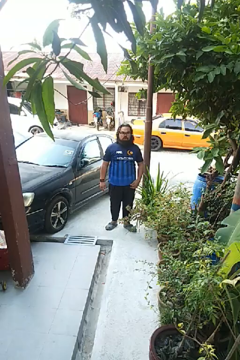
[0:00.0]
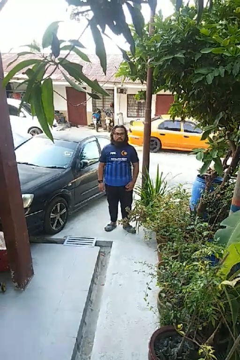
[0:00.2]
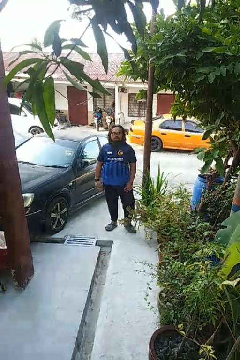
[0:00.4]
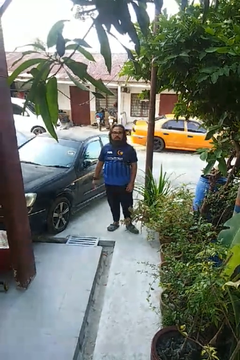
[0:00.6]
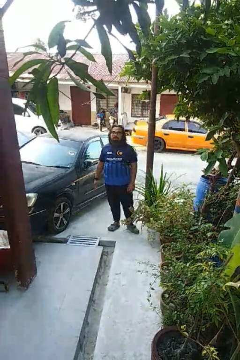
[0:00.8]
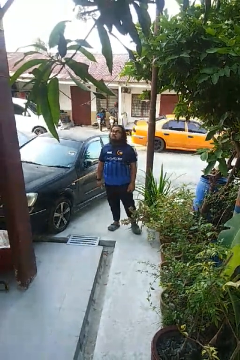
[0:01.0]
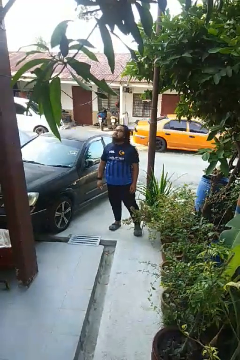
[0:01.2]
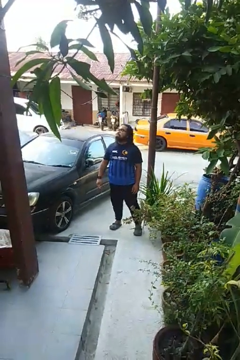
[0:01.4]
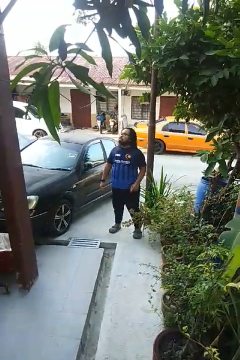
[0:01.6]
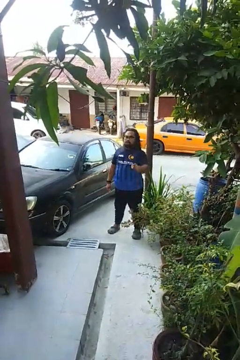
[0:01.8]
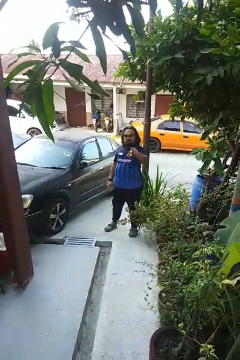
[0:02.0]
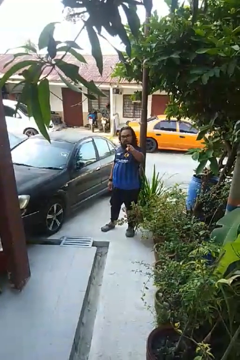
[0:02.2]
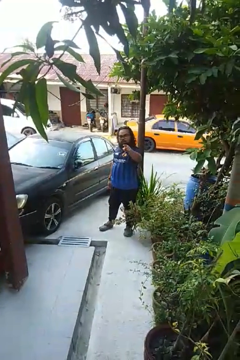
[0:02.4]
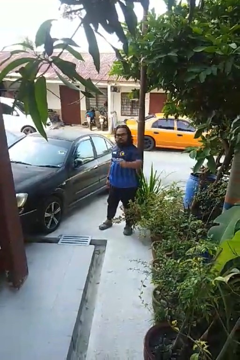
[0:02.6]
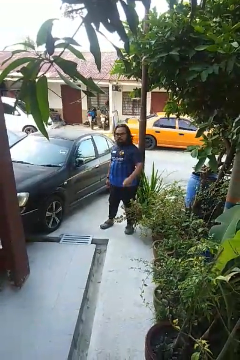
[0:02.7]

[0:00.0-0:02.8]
person points at person

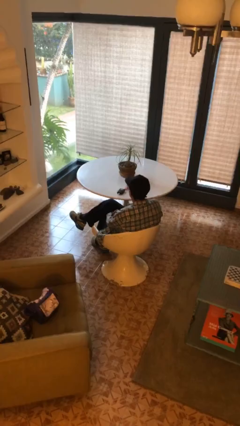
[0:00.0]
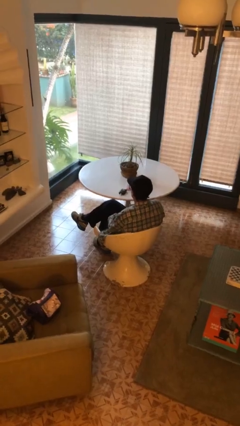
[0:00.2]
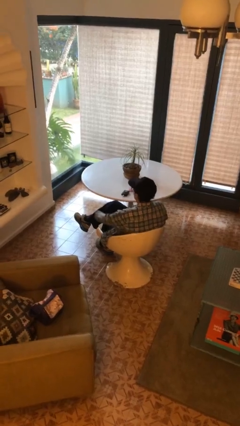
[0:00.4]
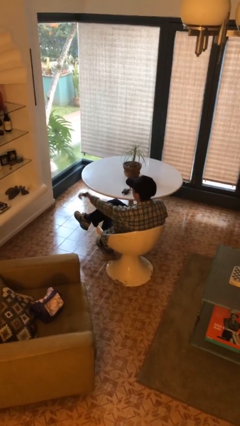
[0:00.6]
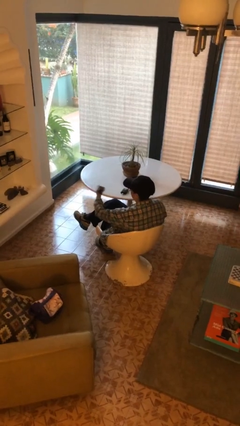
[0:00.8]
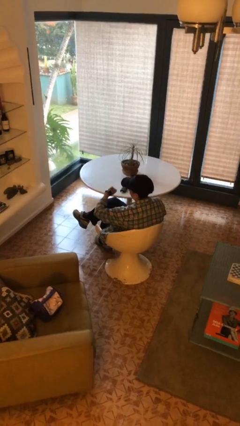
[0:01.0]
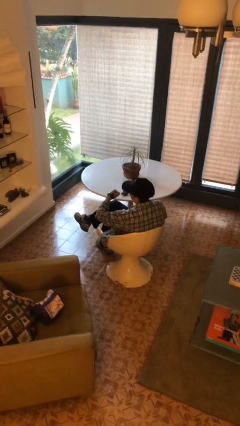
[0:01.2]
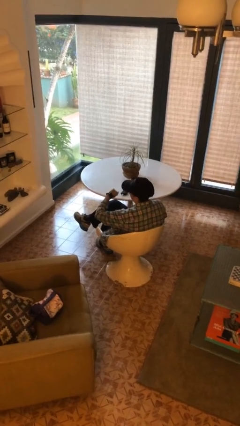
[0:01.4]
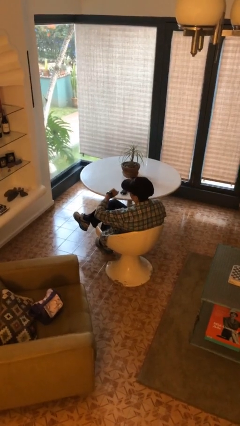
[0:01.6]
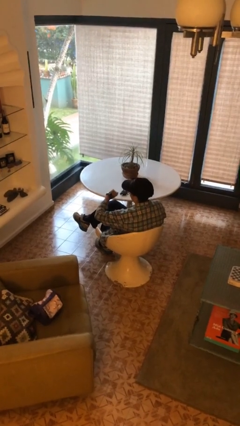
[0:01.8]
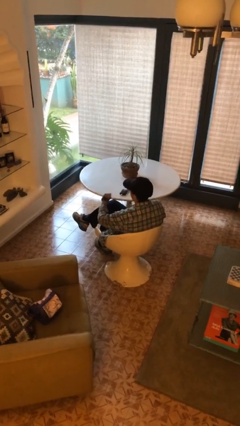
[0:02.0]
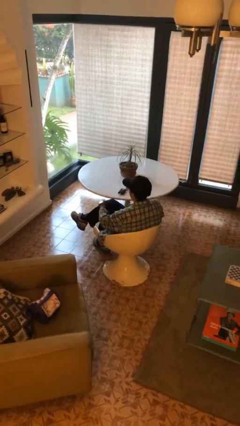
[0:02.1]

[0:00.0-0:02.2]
person looks at wristwatch

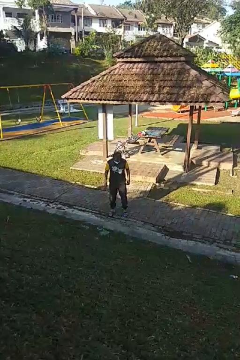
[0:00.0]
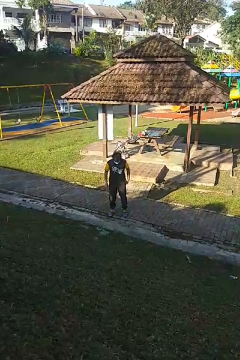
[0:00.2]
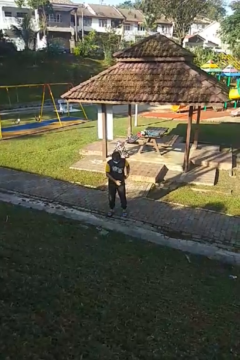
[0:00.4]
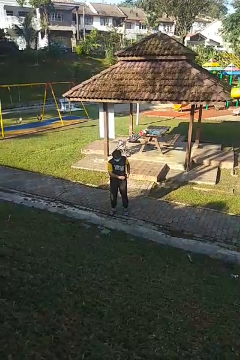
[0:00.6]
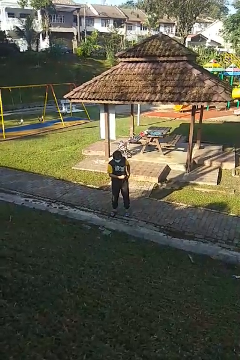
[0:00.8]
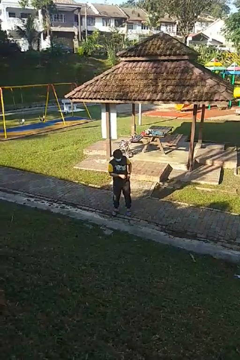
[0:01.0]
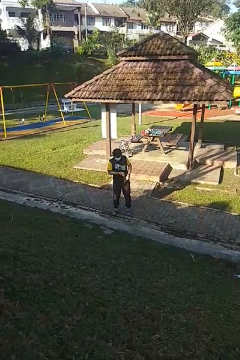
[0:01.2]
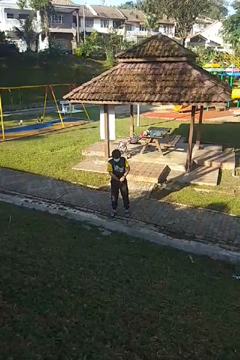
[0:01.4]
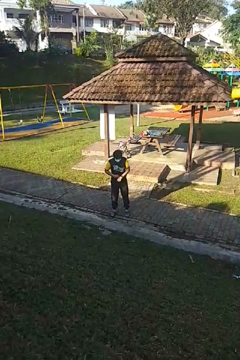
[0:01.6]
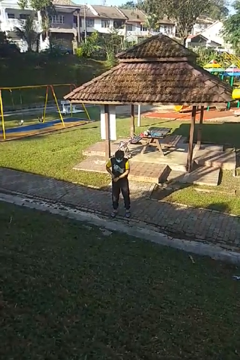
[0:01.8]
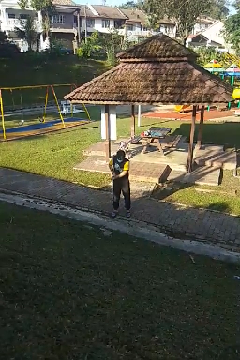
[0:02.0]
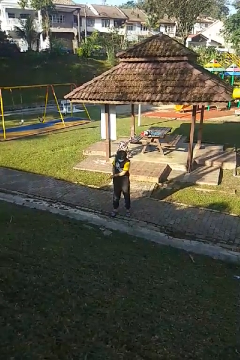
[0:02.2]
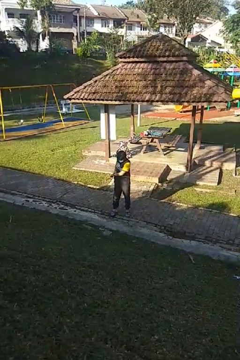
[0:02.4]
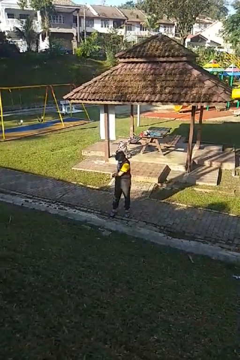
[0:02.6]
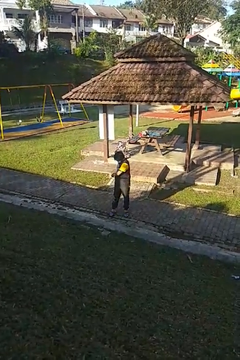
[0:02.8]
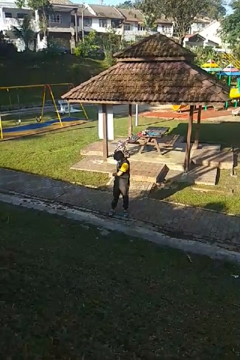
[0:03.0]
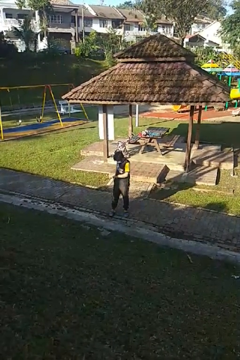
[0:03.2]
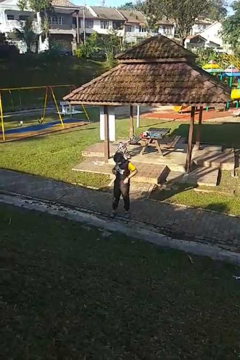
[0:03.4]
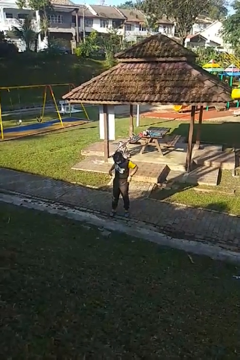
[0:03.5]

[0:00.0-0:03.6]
person tucks in shirt

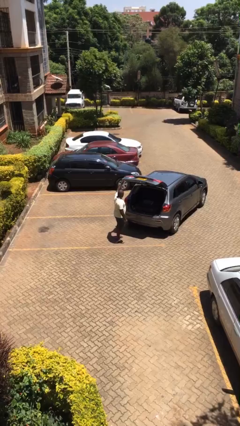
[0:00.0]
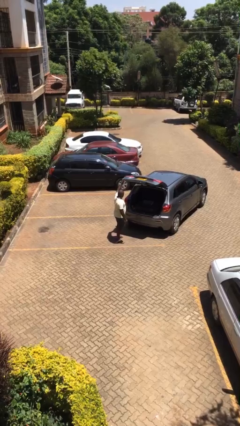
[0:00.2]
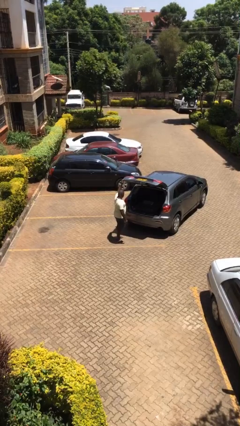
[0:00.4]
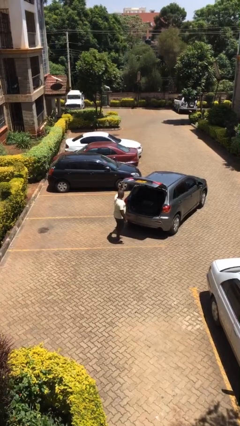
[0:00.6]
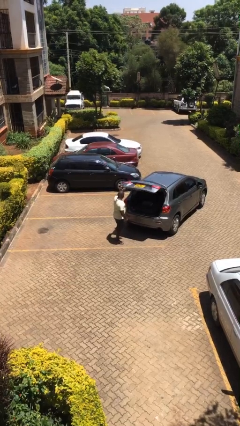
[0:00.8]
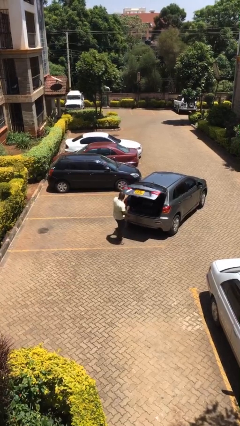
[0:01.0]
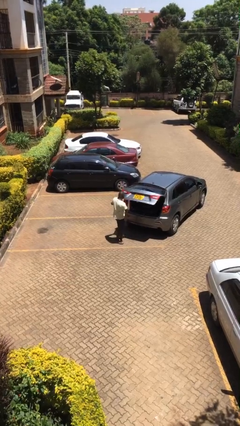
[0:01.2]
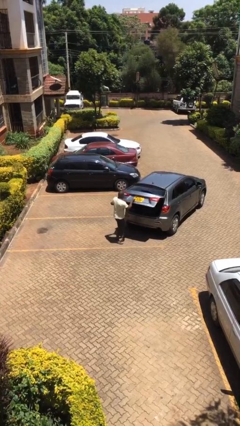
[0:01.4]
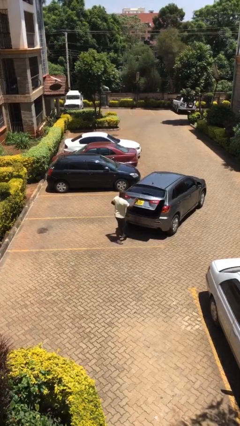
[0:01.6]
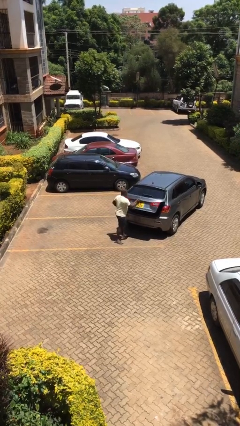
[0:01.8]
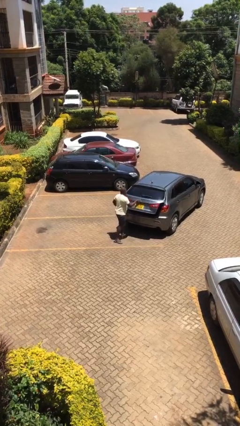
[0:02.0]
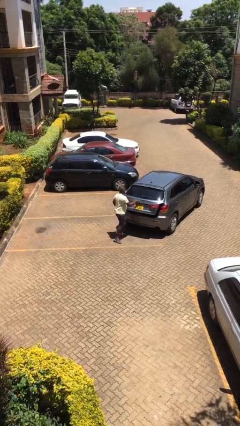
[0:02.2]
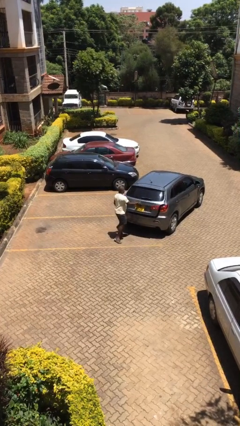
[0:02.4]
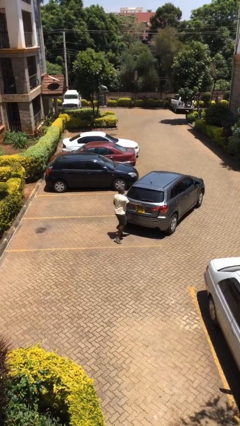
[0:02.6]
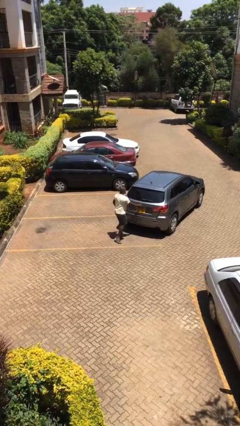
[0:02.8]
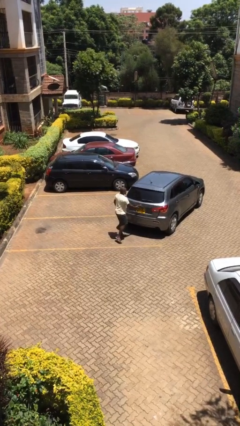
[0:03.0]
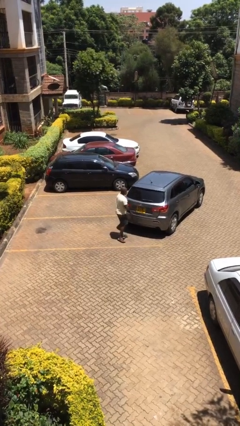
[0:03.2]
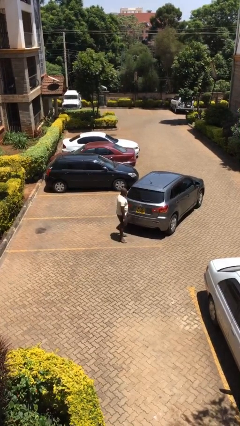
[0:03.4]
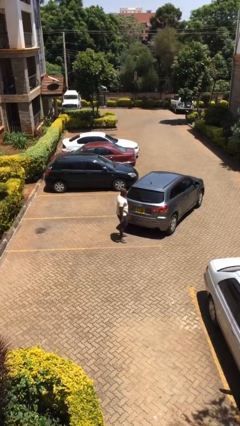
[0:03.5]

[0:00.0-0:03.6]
person closes car trunk

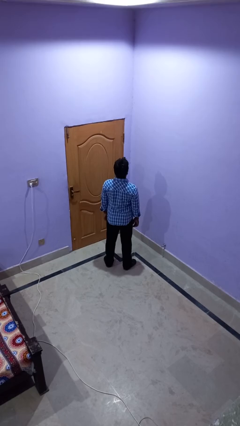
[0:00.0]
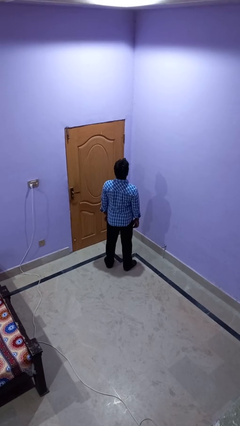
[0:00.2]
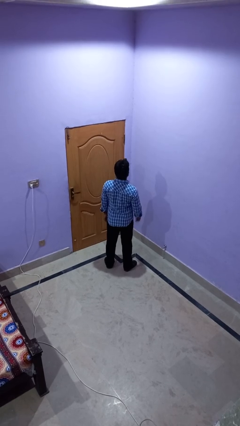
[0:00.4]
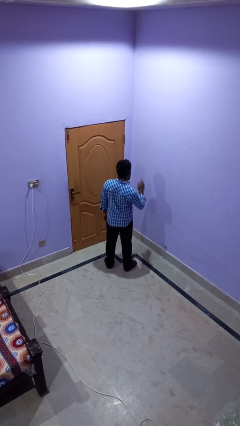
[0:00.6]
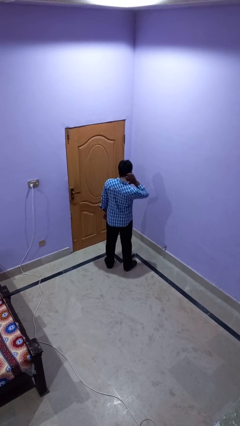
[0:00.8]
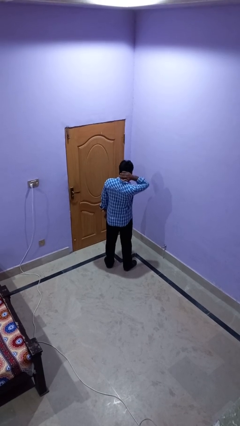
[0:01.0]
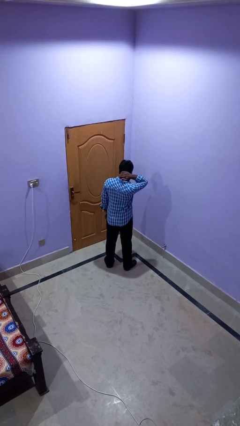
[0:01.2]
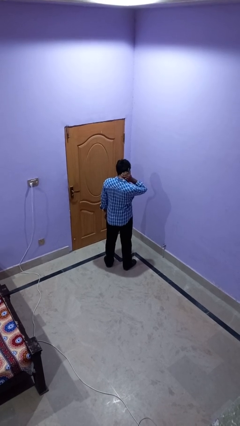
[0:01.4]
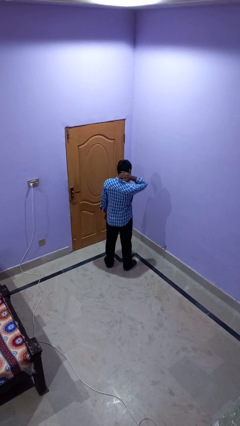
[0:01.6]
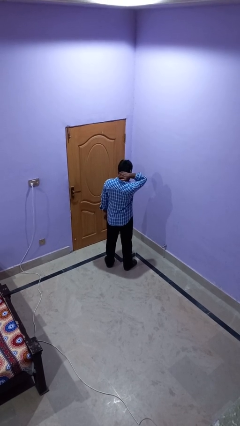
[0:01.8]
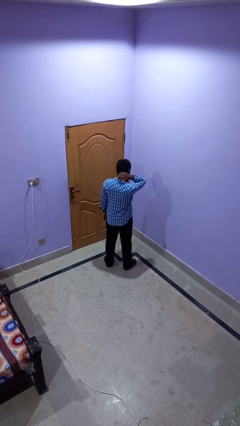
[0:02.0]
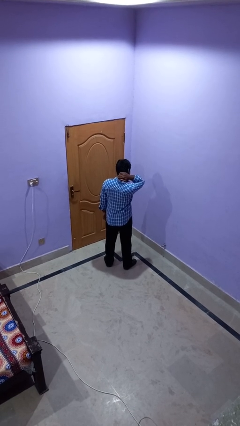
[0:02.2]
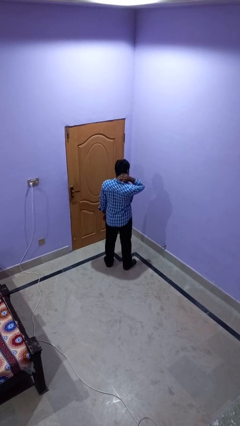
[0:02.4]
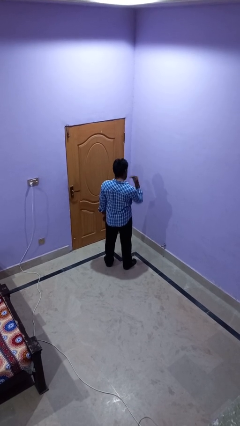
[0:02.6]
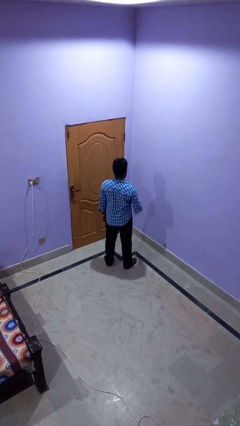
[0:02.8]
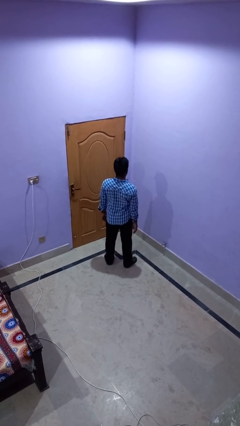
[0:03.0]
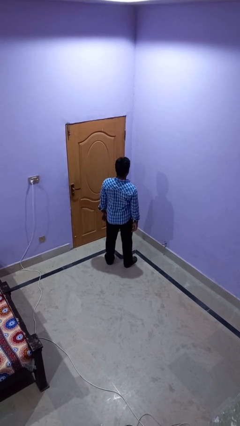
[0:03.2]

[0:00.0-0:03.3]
person rubs neck

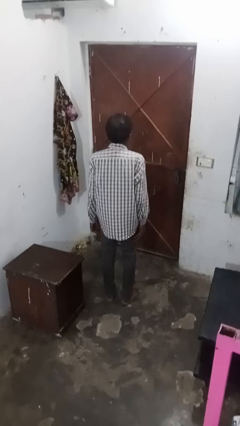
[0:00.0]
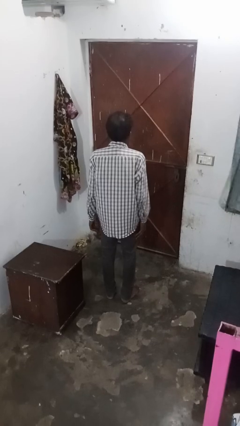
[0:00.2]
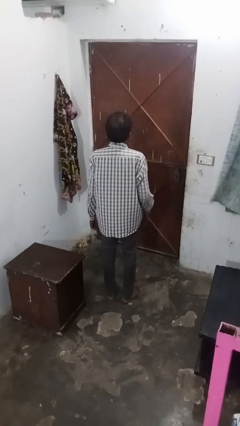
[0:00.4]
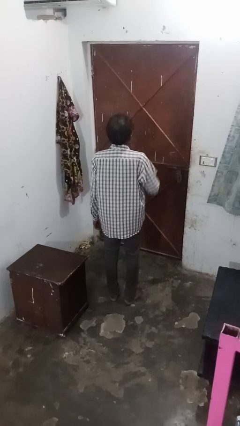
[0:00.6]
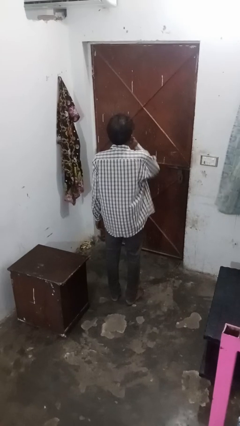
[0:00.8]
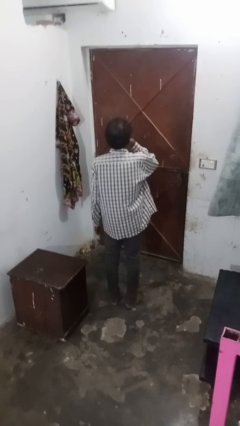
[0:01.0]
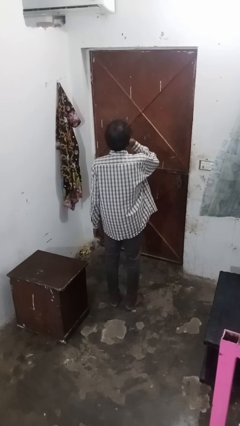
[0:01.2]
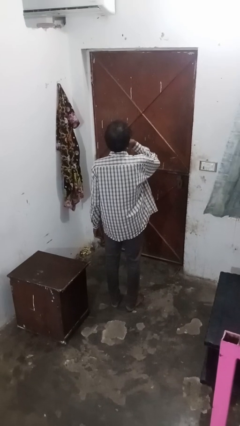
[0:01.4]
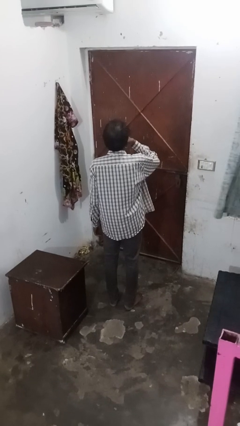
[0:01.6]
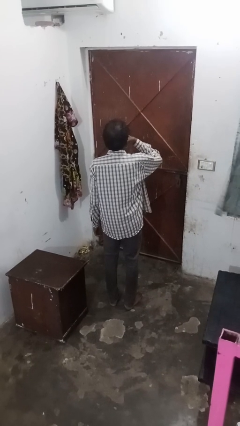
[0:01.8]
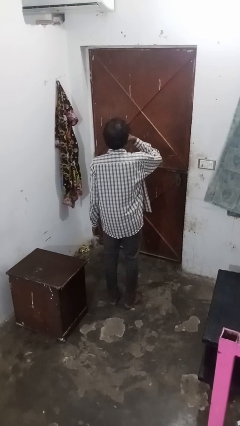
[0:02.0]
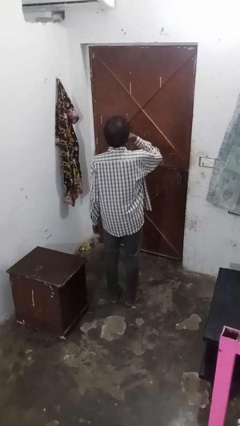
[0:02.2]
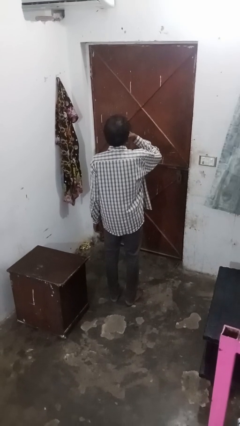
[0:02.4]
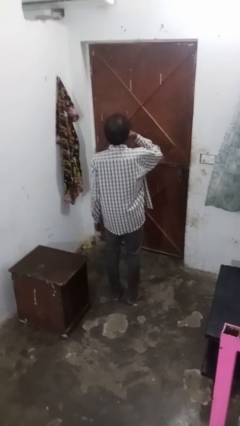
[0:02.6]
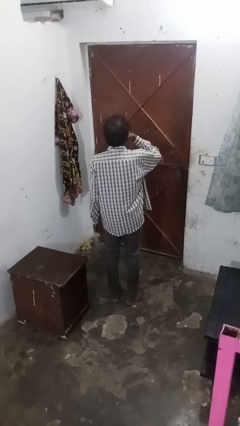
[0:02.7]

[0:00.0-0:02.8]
person strokes chin
